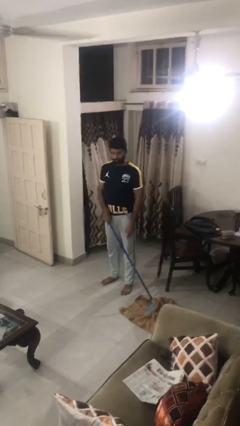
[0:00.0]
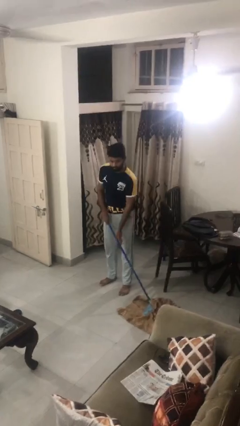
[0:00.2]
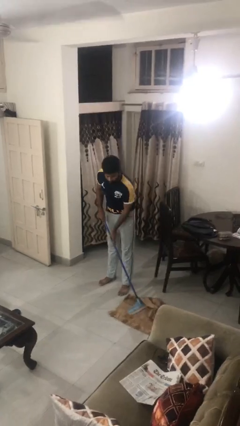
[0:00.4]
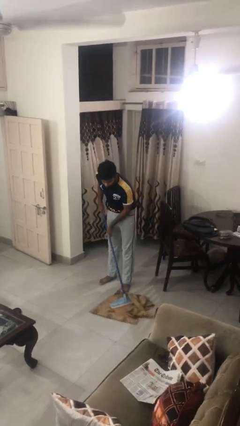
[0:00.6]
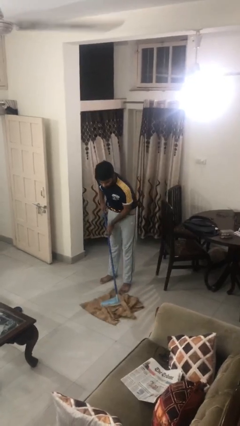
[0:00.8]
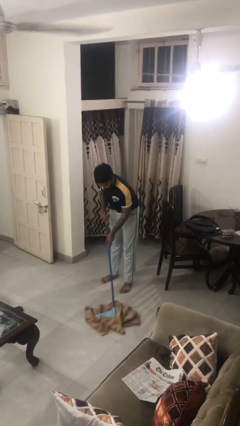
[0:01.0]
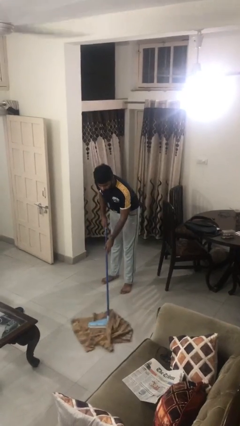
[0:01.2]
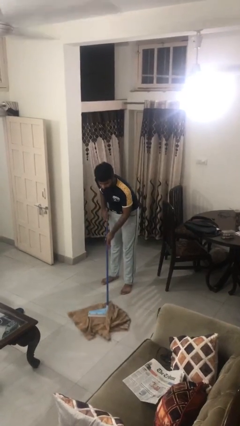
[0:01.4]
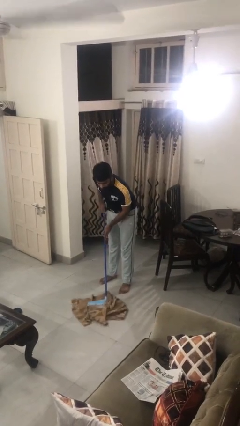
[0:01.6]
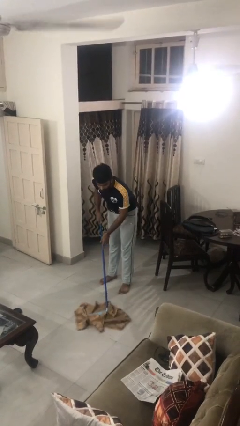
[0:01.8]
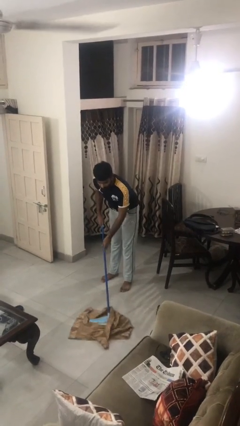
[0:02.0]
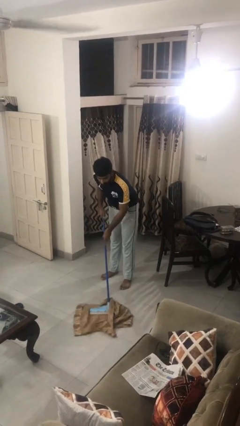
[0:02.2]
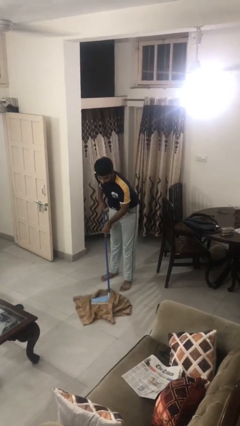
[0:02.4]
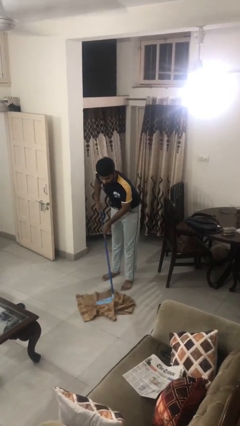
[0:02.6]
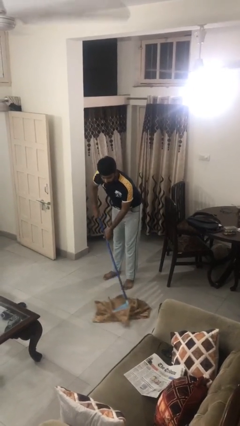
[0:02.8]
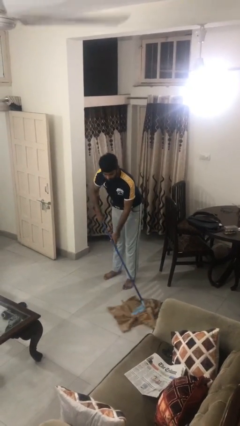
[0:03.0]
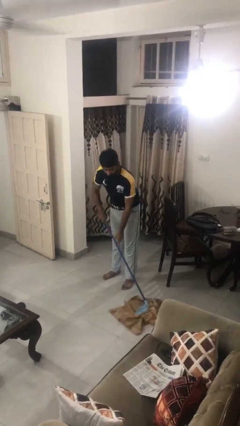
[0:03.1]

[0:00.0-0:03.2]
person mops

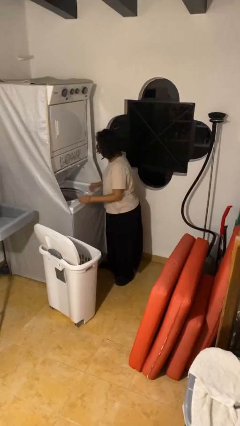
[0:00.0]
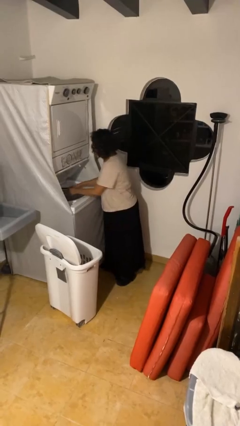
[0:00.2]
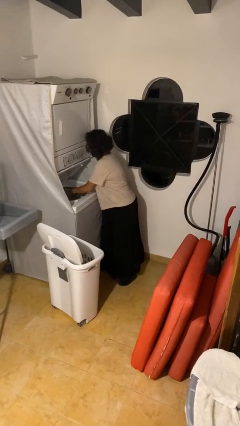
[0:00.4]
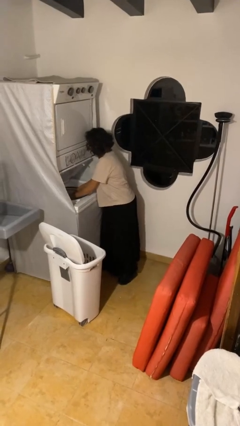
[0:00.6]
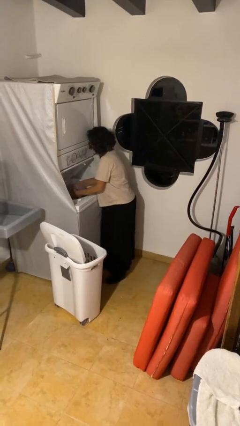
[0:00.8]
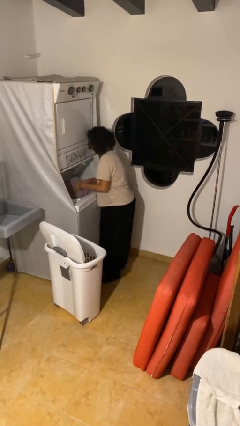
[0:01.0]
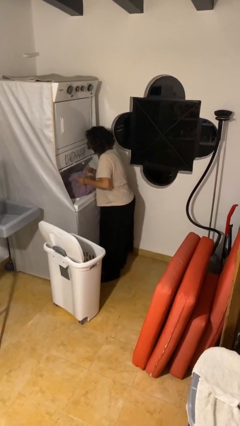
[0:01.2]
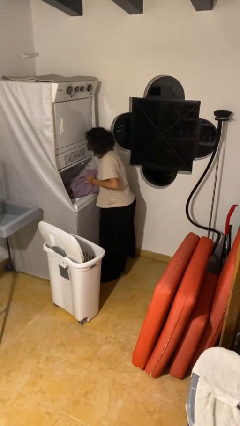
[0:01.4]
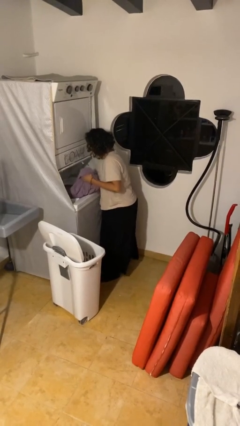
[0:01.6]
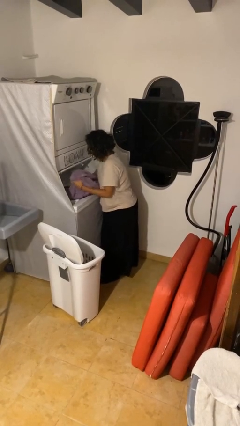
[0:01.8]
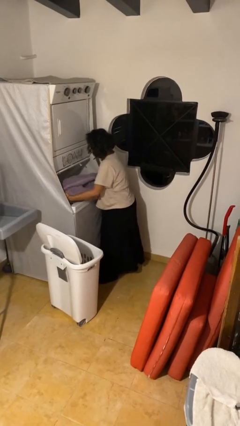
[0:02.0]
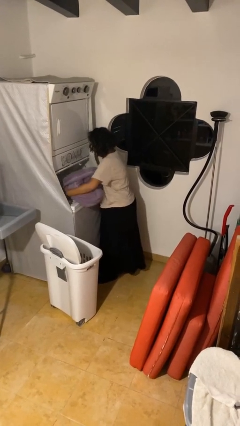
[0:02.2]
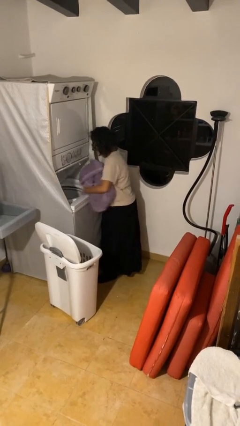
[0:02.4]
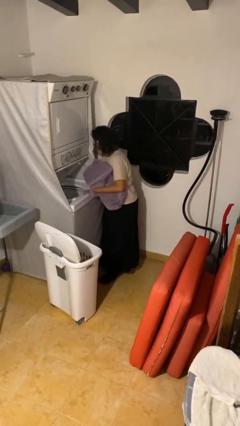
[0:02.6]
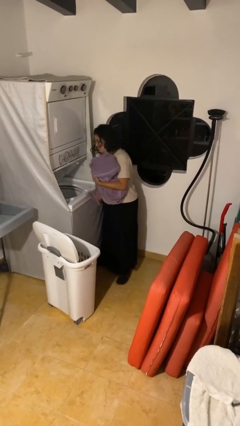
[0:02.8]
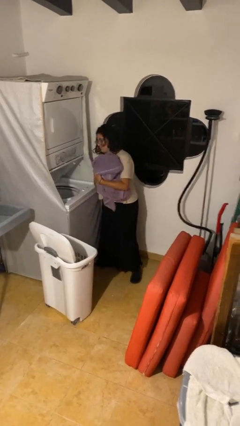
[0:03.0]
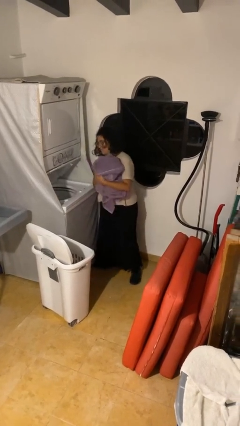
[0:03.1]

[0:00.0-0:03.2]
person unloads clotheswasher

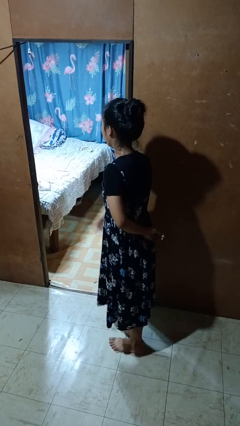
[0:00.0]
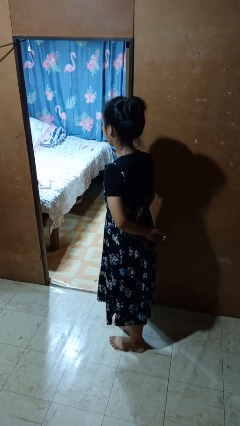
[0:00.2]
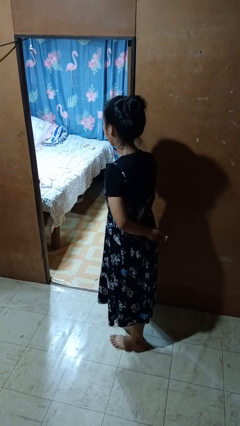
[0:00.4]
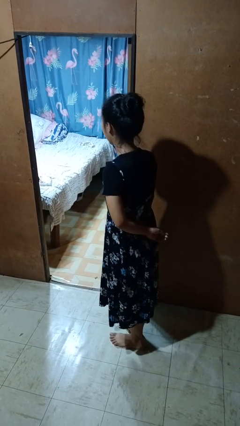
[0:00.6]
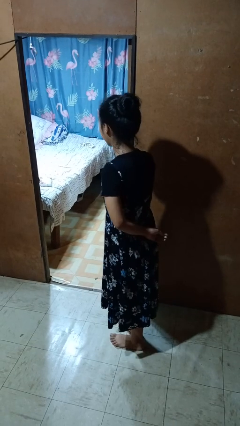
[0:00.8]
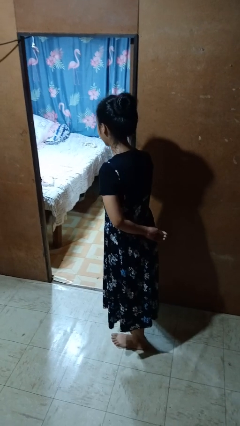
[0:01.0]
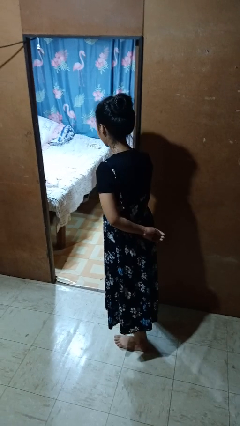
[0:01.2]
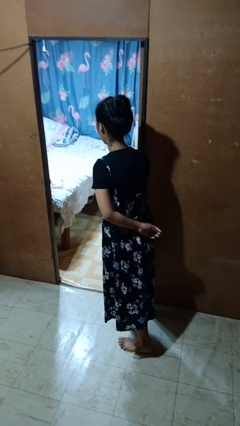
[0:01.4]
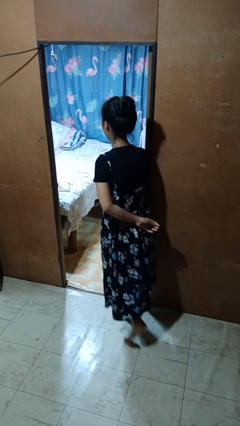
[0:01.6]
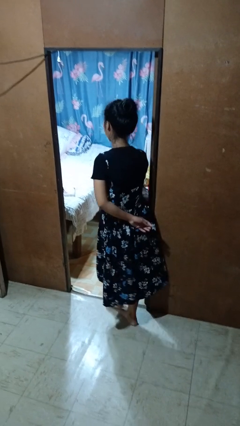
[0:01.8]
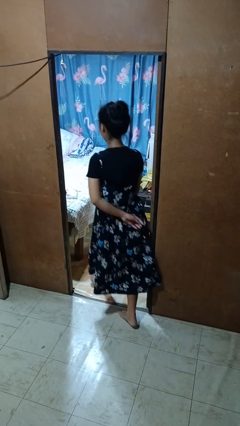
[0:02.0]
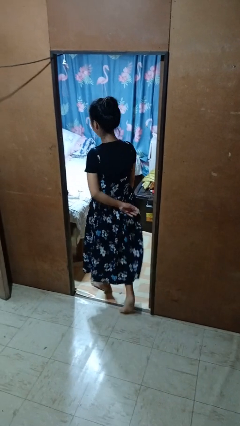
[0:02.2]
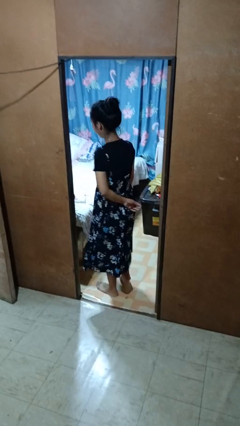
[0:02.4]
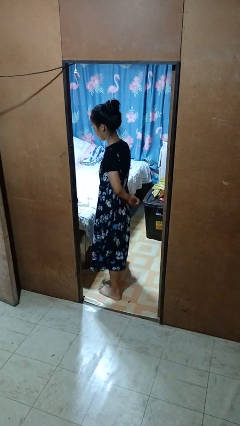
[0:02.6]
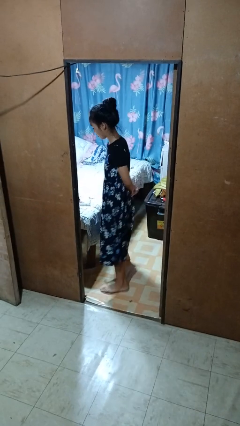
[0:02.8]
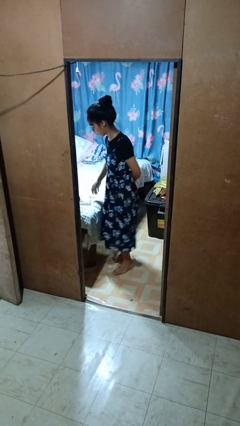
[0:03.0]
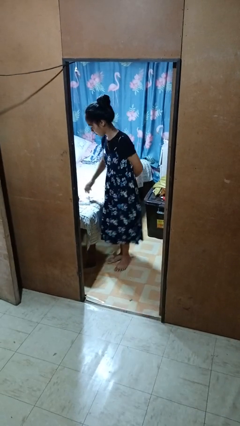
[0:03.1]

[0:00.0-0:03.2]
person throws object on bed

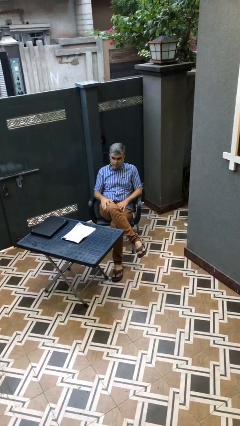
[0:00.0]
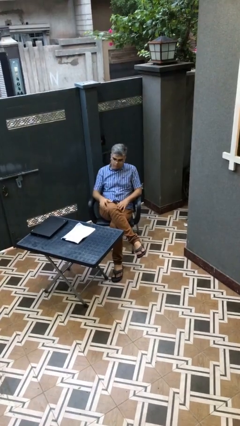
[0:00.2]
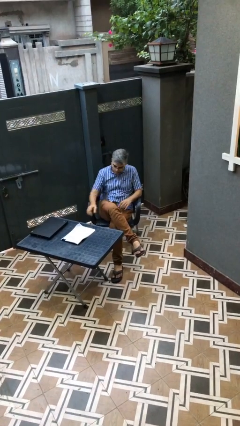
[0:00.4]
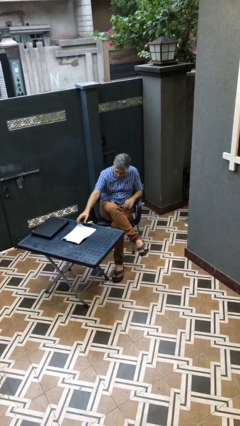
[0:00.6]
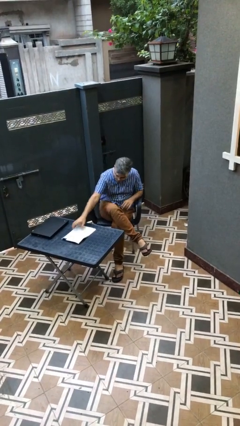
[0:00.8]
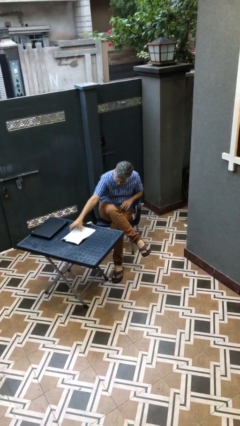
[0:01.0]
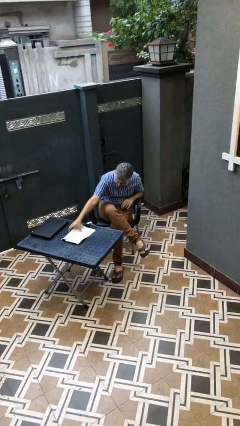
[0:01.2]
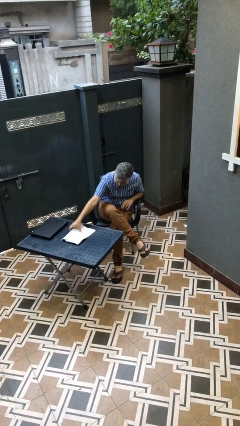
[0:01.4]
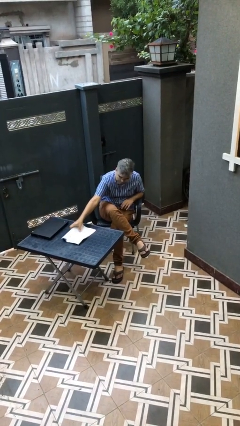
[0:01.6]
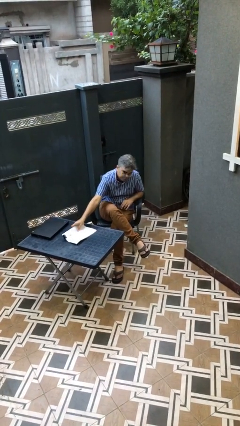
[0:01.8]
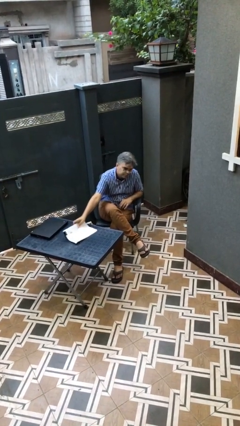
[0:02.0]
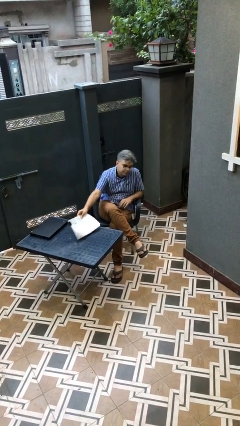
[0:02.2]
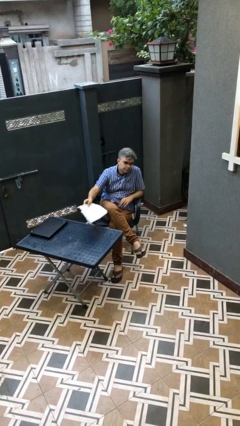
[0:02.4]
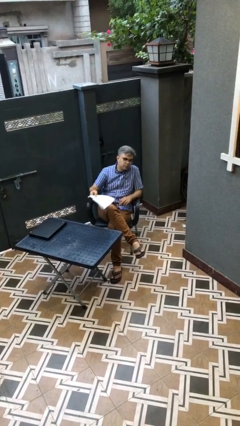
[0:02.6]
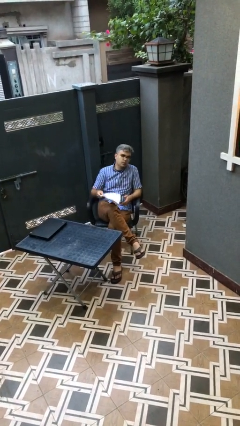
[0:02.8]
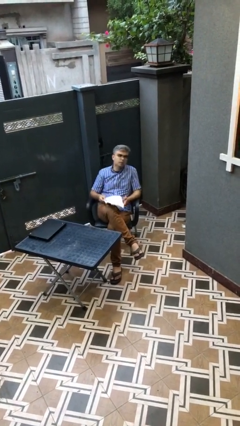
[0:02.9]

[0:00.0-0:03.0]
person picks up object from table

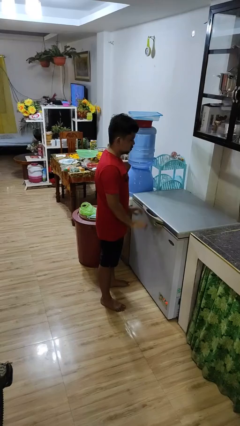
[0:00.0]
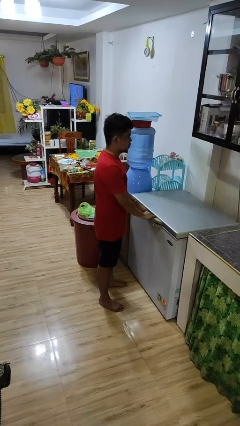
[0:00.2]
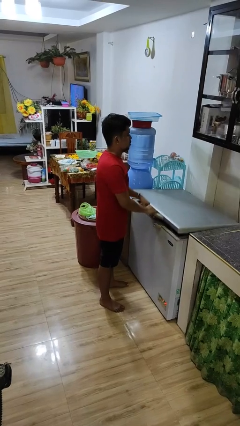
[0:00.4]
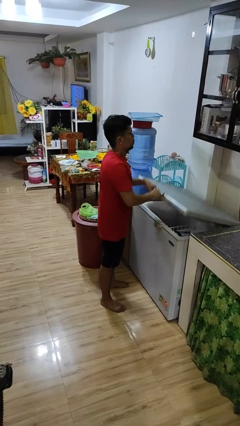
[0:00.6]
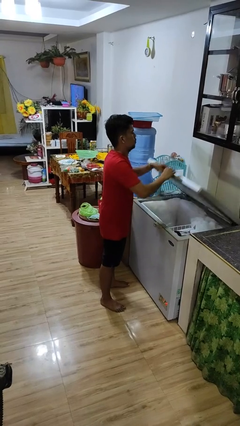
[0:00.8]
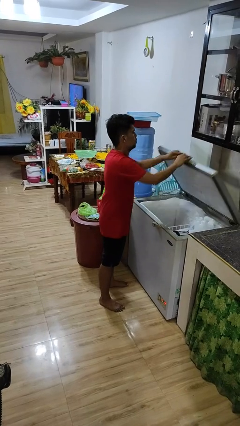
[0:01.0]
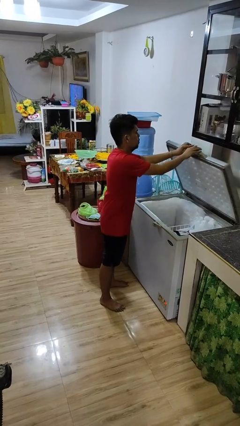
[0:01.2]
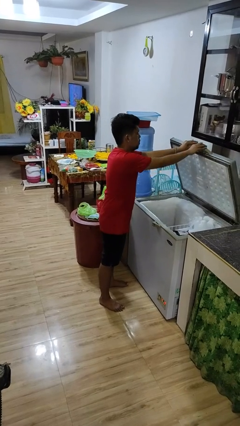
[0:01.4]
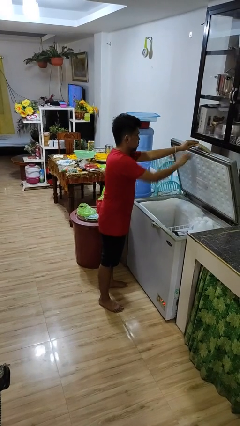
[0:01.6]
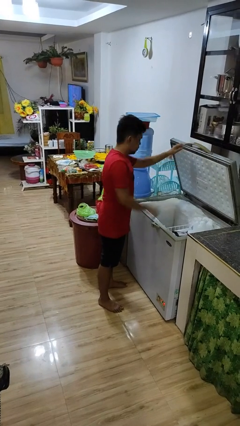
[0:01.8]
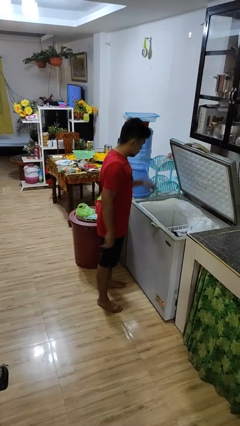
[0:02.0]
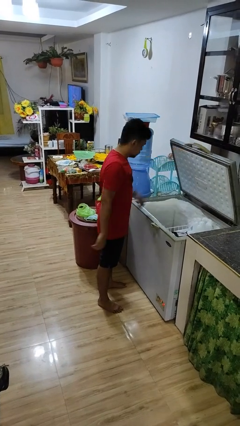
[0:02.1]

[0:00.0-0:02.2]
person opens refrigerator

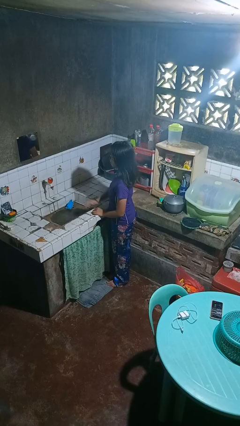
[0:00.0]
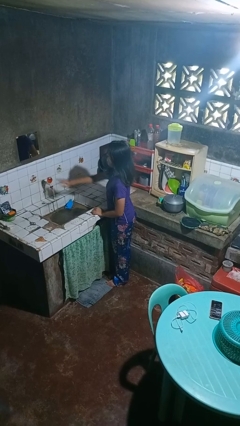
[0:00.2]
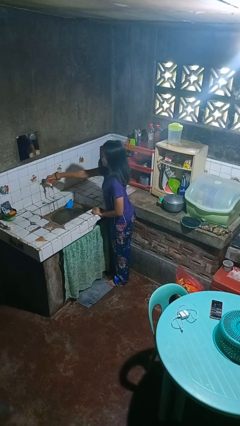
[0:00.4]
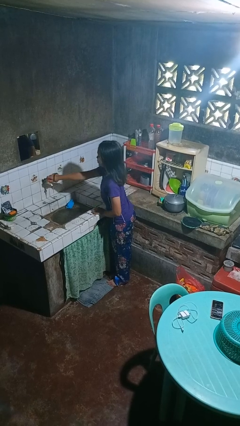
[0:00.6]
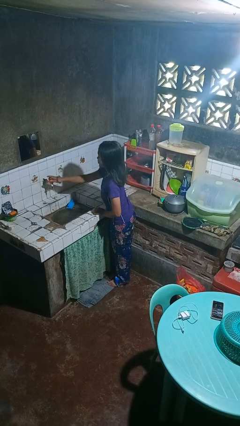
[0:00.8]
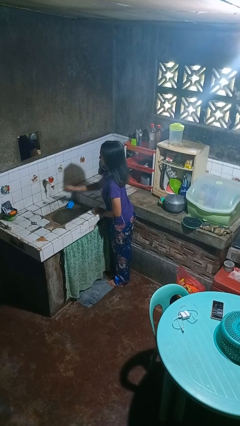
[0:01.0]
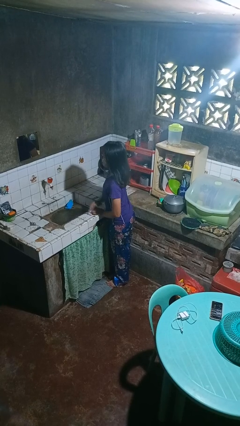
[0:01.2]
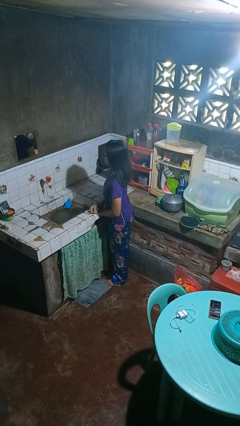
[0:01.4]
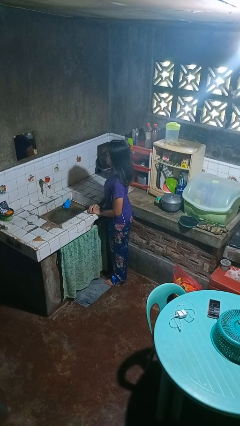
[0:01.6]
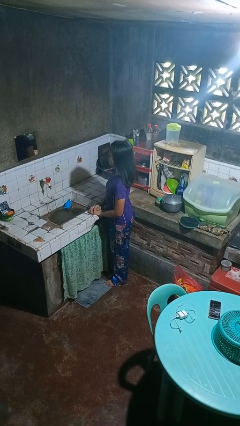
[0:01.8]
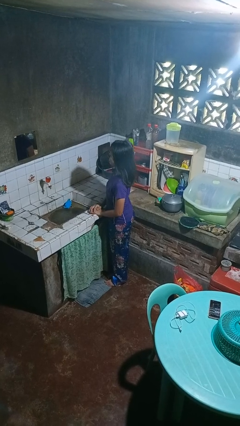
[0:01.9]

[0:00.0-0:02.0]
person turns off faucet

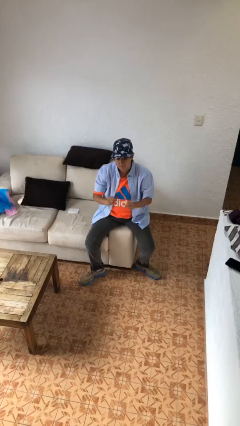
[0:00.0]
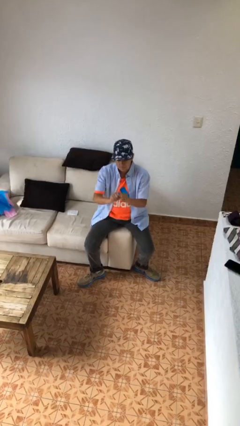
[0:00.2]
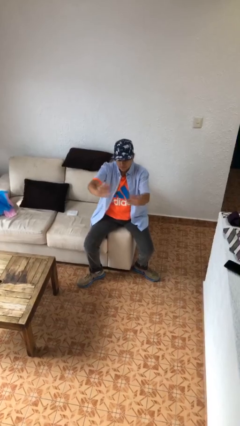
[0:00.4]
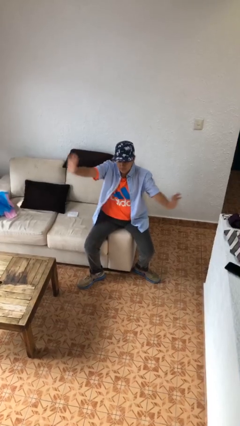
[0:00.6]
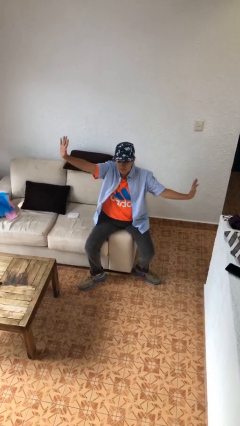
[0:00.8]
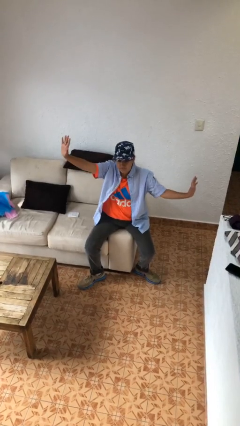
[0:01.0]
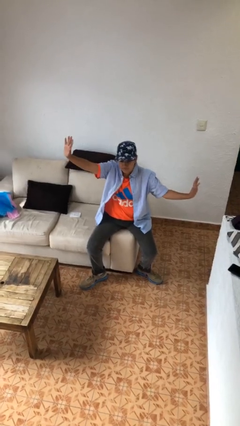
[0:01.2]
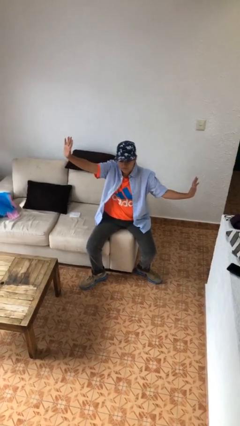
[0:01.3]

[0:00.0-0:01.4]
person gestures zoom in
